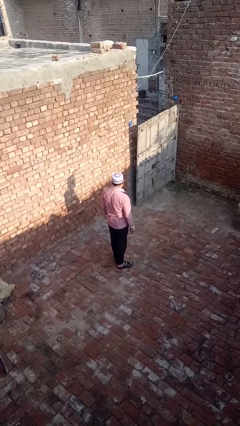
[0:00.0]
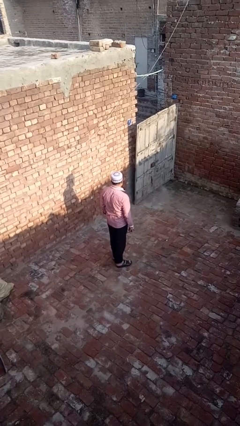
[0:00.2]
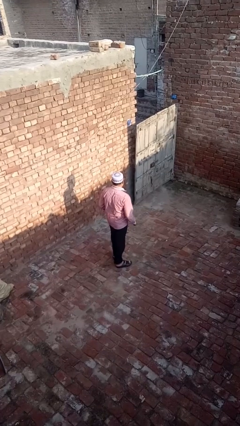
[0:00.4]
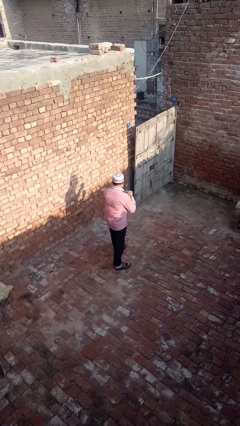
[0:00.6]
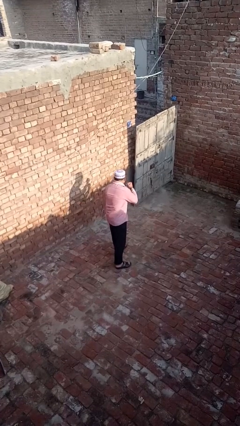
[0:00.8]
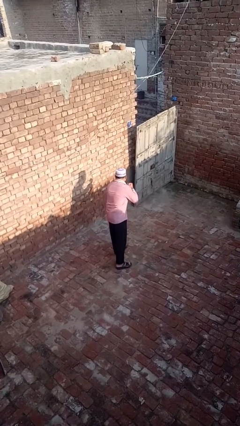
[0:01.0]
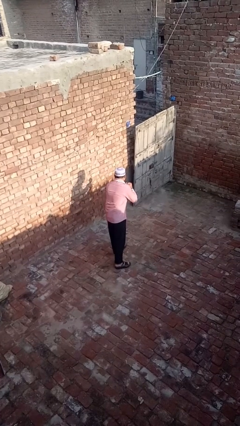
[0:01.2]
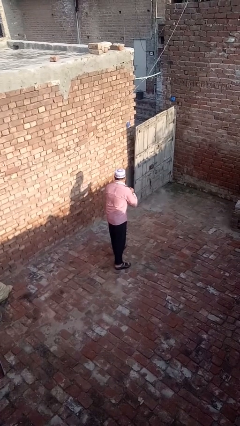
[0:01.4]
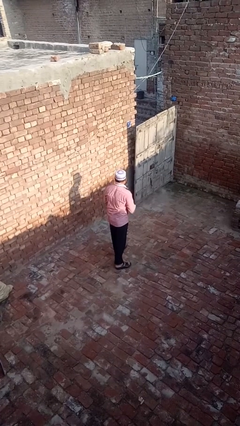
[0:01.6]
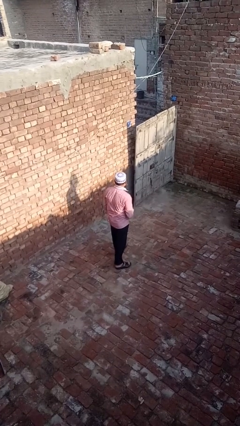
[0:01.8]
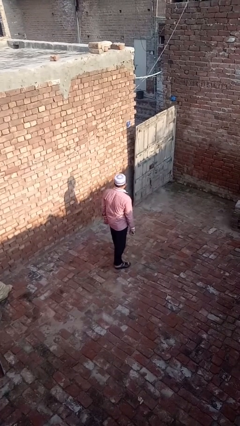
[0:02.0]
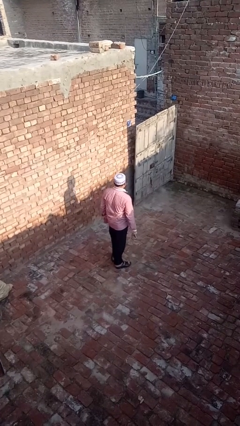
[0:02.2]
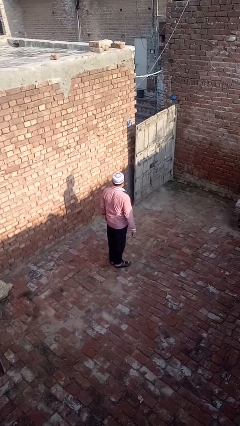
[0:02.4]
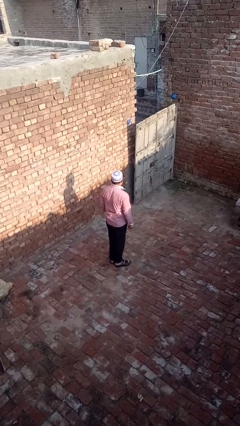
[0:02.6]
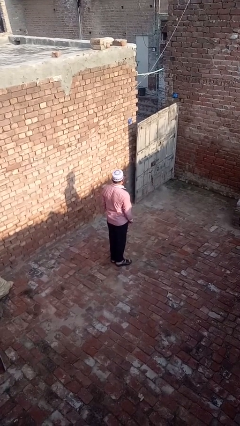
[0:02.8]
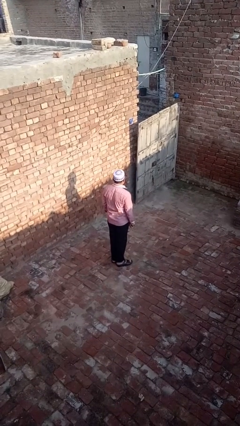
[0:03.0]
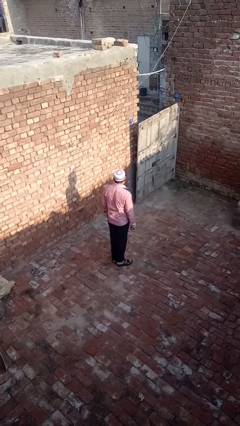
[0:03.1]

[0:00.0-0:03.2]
person karate chop

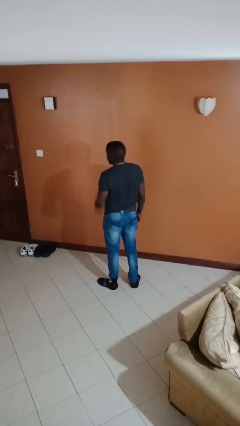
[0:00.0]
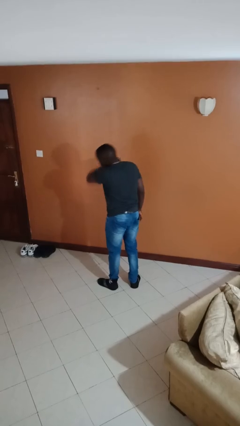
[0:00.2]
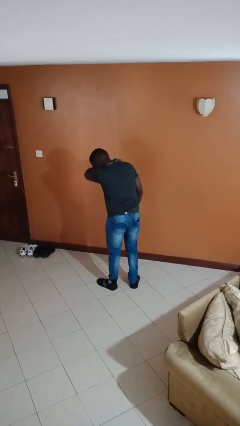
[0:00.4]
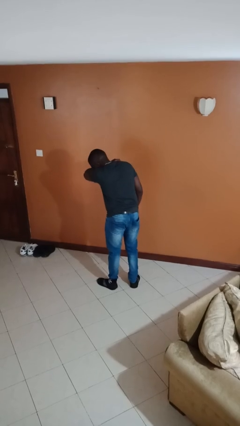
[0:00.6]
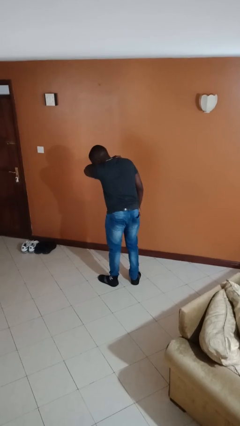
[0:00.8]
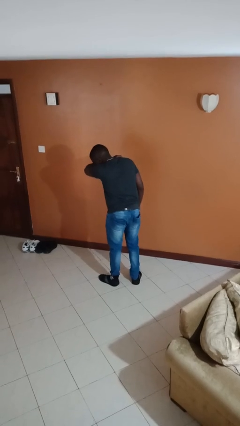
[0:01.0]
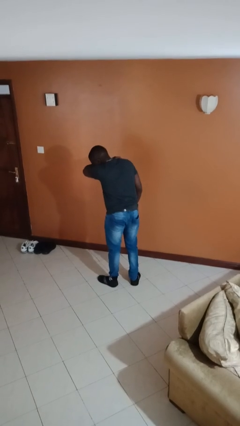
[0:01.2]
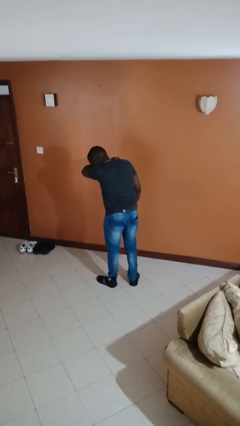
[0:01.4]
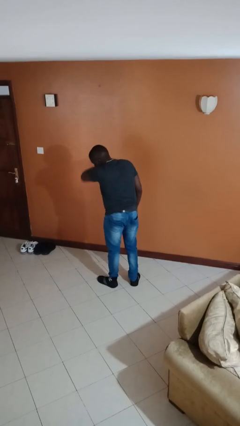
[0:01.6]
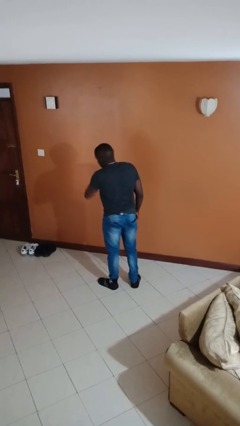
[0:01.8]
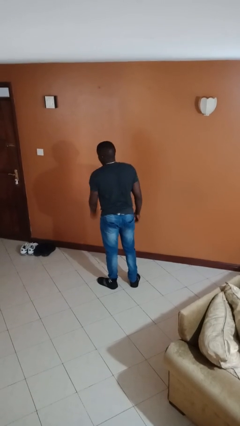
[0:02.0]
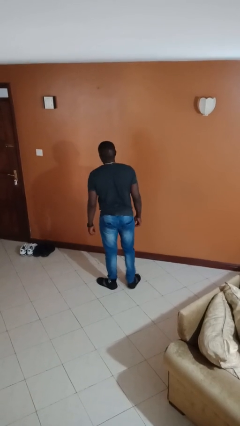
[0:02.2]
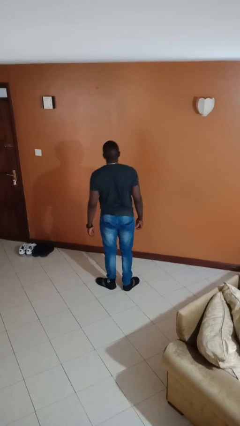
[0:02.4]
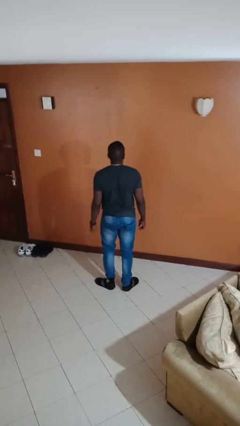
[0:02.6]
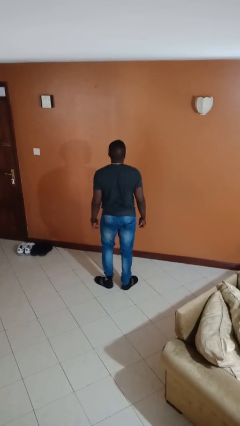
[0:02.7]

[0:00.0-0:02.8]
person sneezes into arm

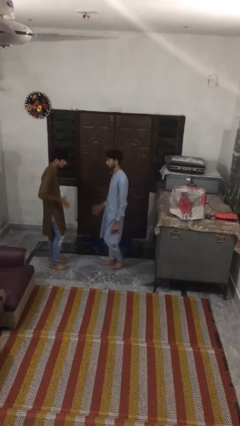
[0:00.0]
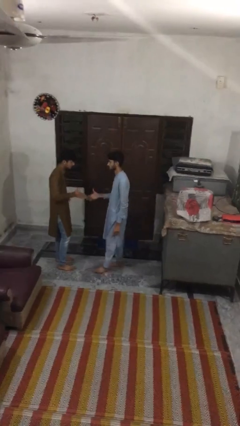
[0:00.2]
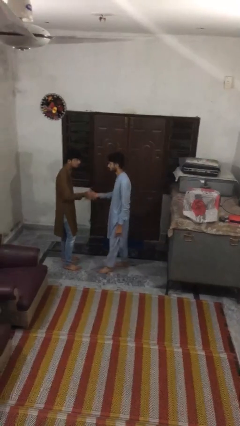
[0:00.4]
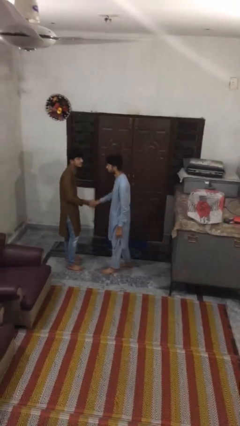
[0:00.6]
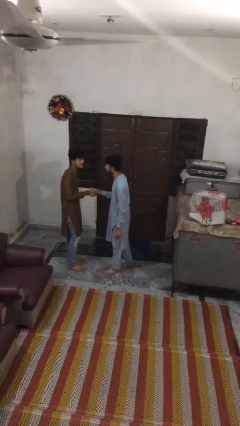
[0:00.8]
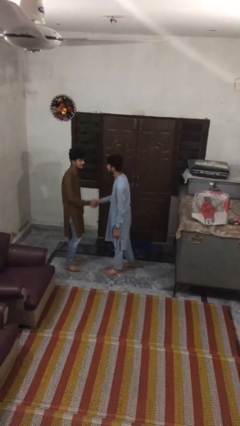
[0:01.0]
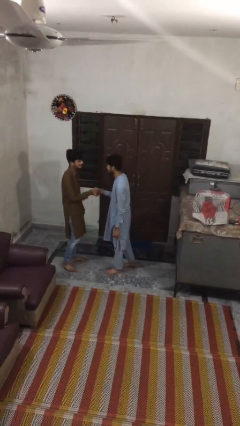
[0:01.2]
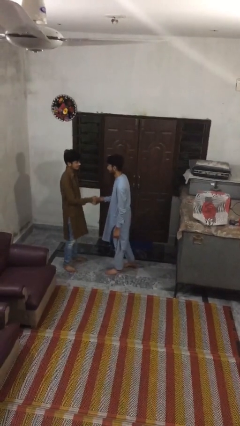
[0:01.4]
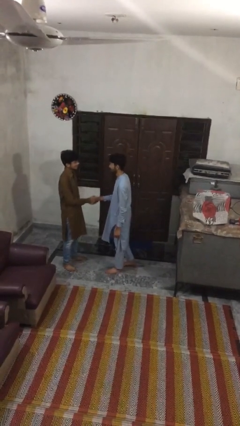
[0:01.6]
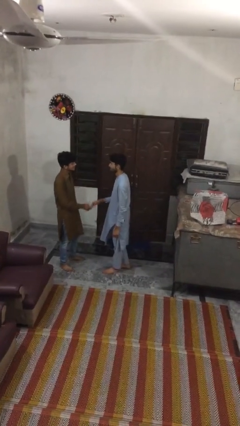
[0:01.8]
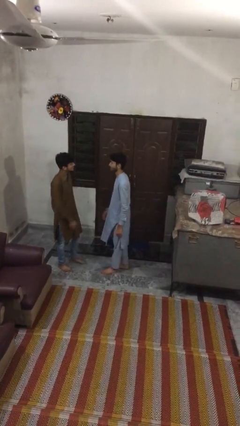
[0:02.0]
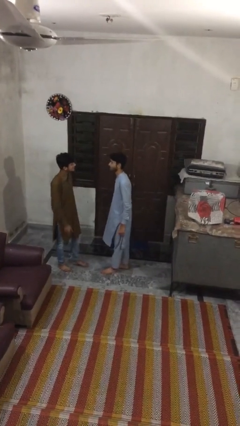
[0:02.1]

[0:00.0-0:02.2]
person shakes hand

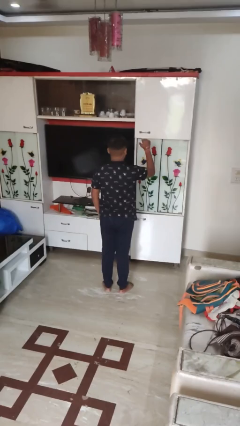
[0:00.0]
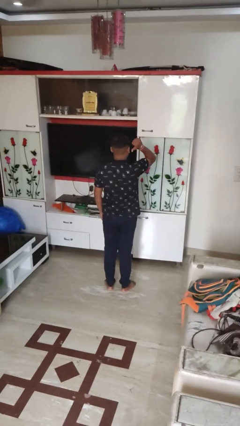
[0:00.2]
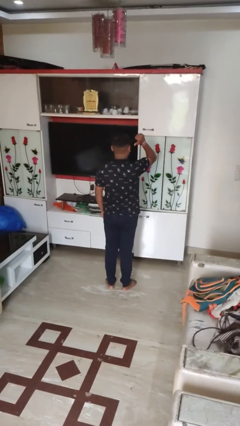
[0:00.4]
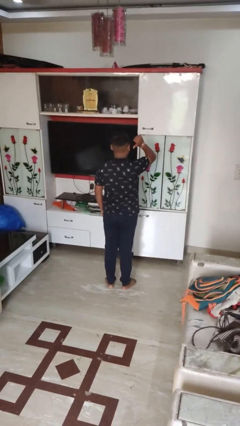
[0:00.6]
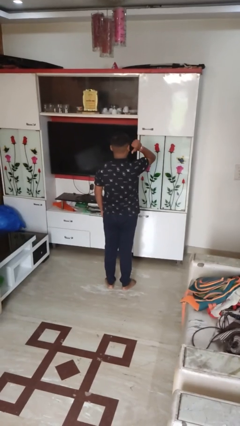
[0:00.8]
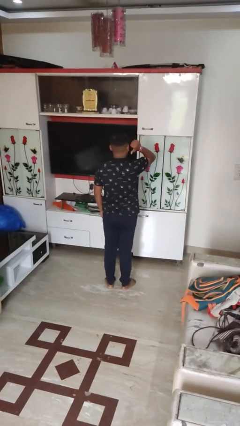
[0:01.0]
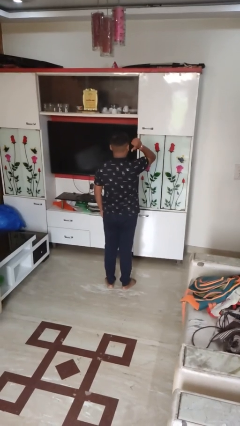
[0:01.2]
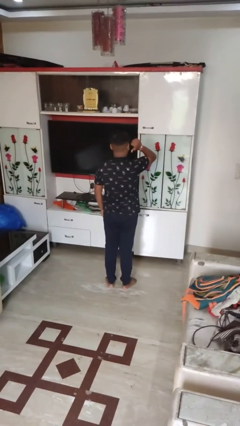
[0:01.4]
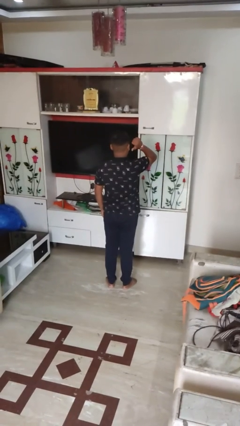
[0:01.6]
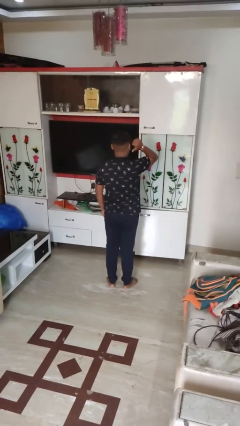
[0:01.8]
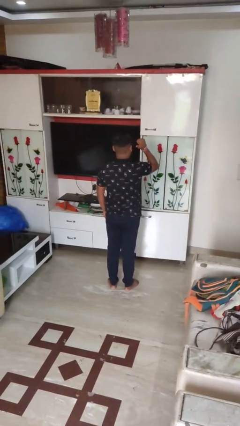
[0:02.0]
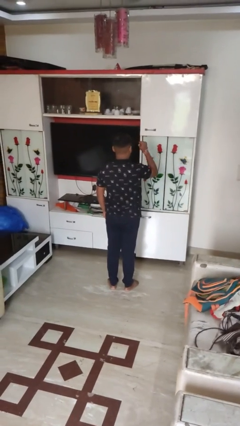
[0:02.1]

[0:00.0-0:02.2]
person gestures behind me

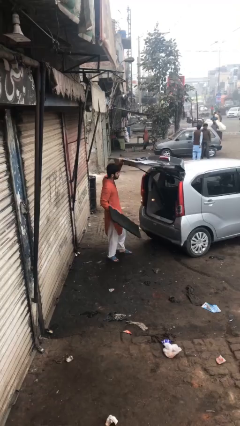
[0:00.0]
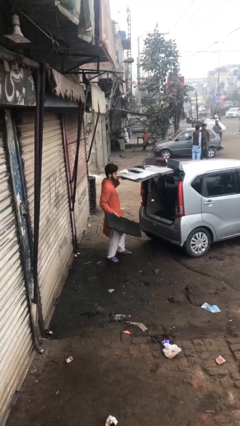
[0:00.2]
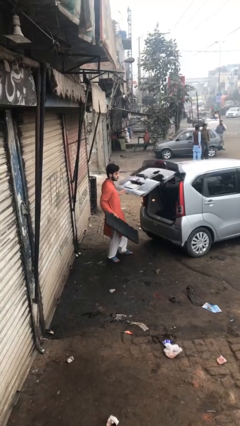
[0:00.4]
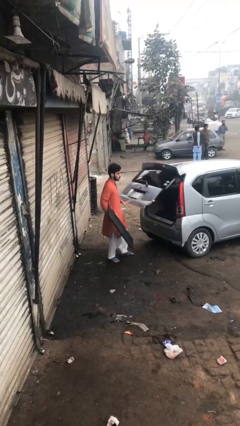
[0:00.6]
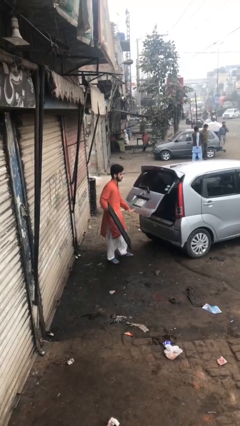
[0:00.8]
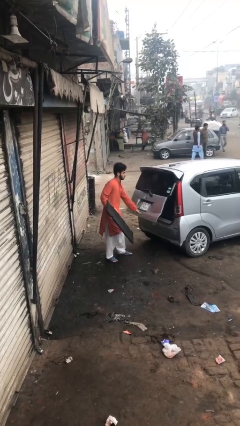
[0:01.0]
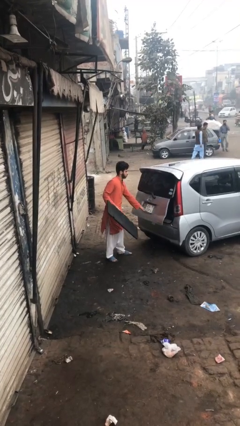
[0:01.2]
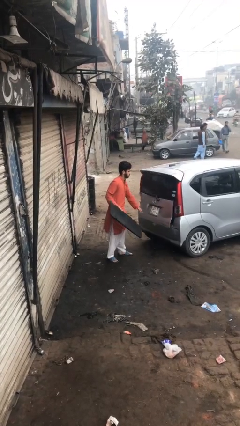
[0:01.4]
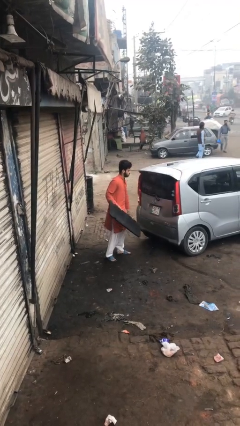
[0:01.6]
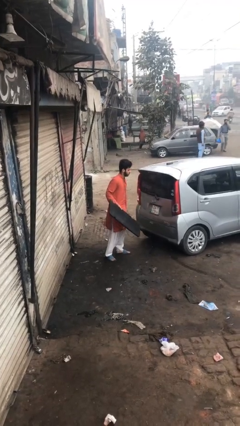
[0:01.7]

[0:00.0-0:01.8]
person closes car trunk

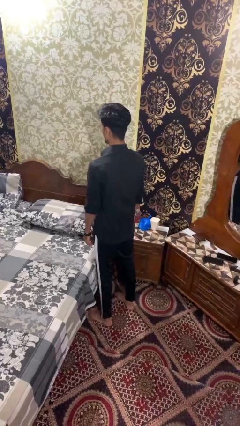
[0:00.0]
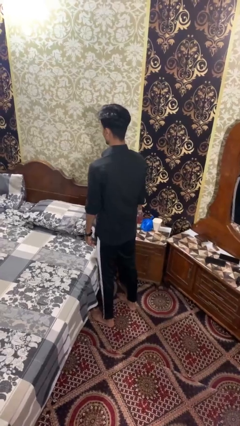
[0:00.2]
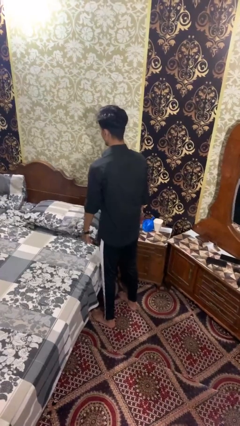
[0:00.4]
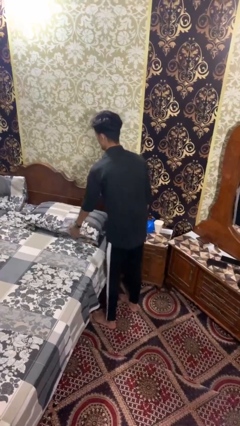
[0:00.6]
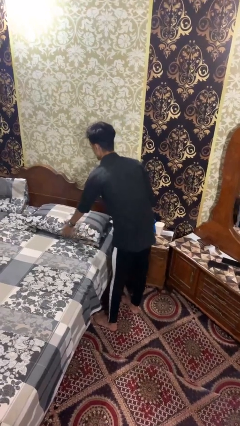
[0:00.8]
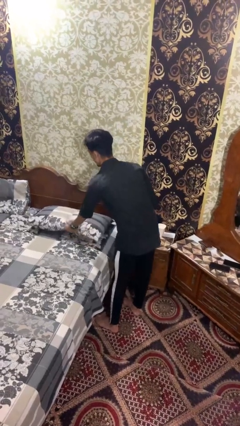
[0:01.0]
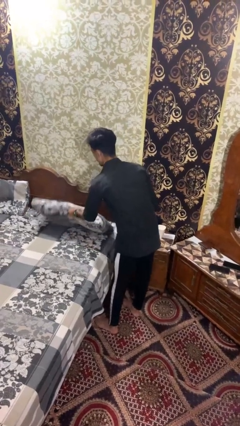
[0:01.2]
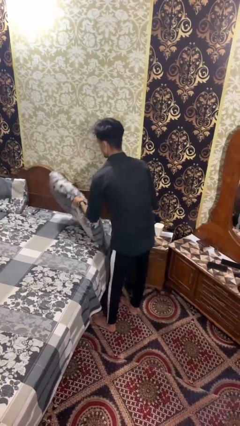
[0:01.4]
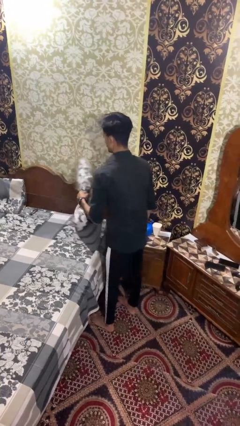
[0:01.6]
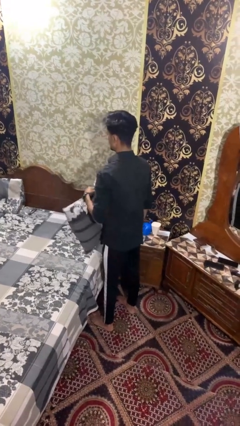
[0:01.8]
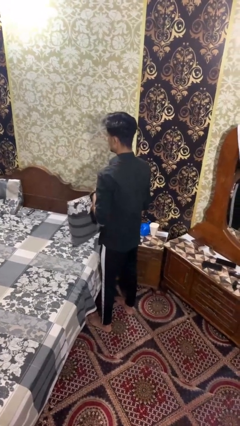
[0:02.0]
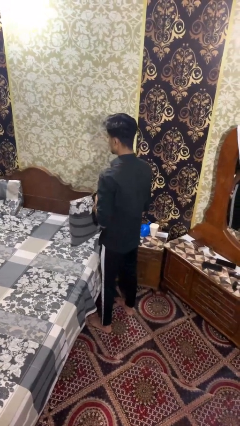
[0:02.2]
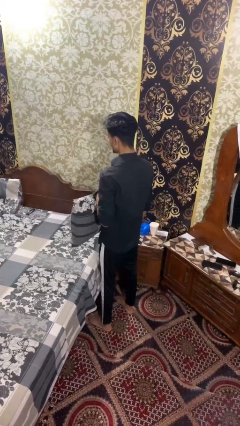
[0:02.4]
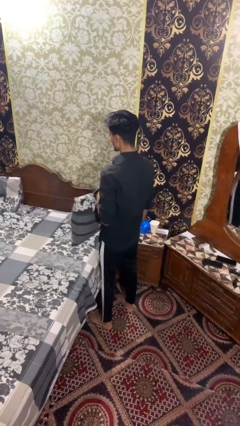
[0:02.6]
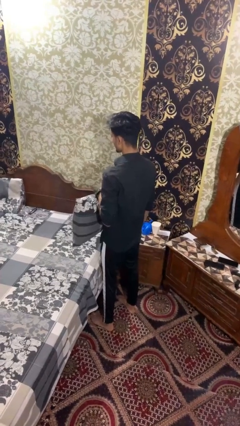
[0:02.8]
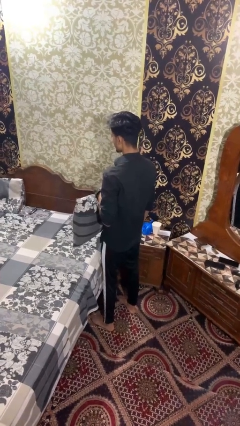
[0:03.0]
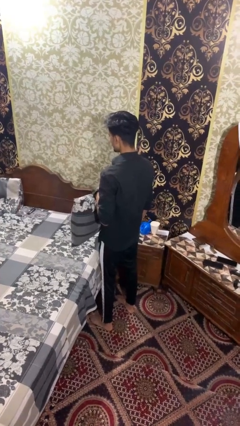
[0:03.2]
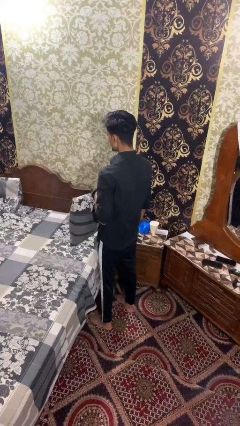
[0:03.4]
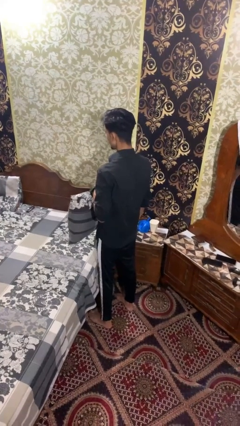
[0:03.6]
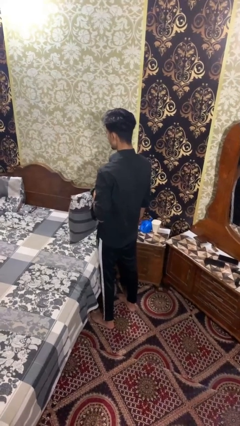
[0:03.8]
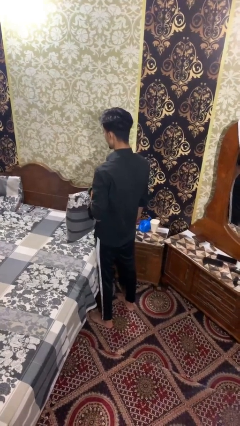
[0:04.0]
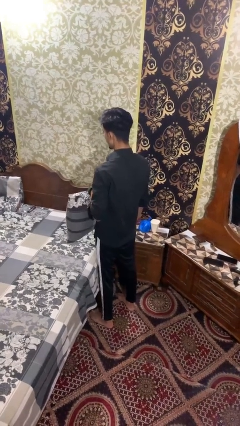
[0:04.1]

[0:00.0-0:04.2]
person picks up object from bed

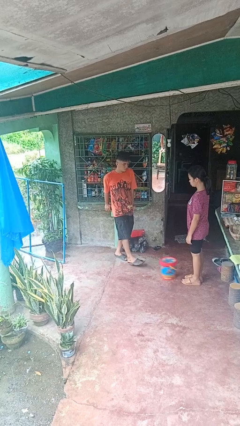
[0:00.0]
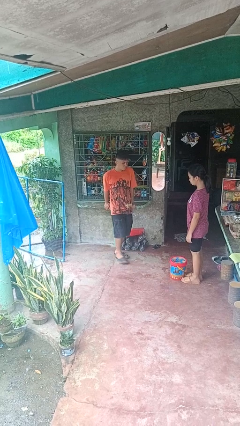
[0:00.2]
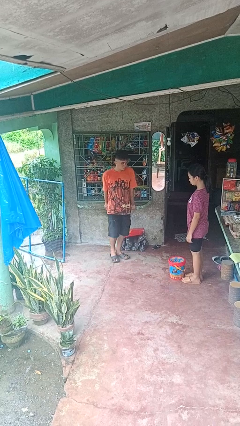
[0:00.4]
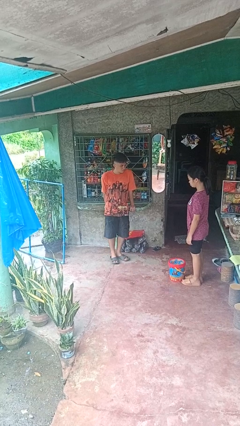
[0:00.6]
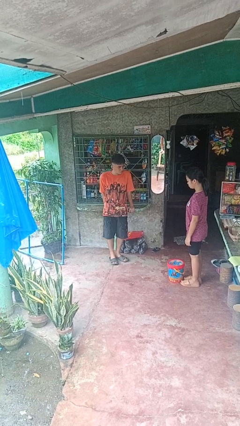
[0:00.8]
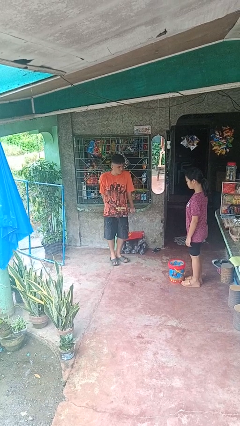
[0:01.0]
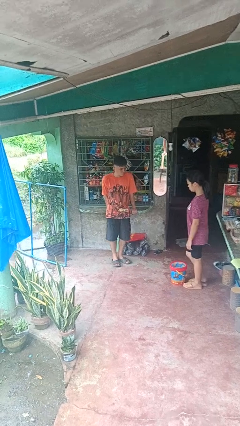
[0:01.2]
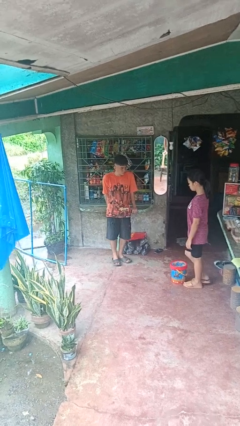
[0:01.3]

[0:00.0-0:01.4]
person kicks object to person
